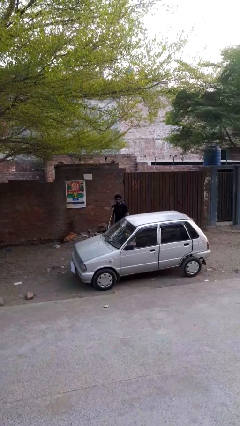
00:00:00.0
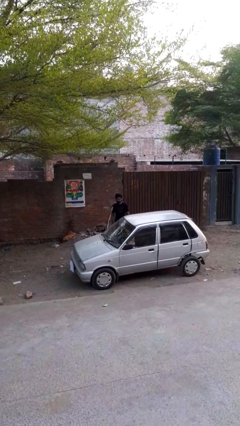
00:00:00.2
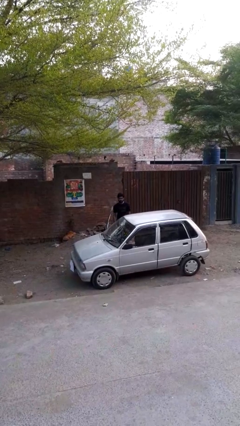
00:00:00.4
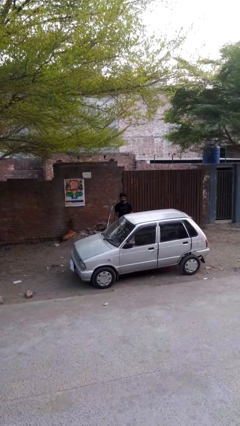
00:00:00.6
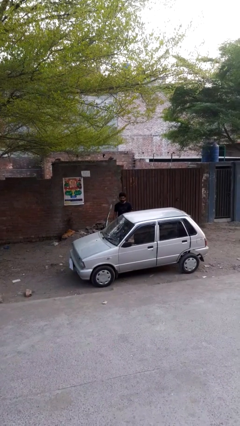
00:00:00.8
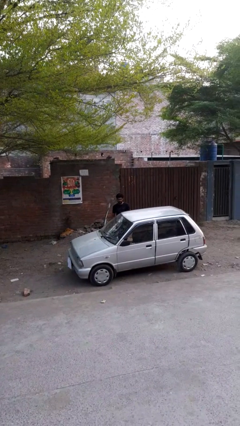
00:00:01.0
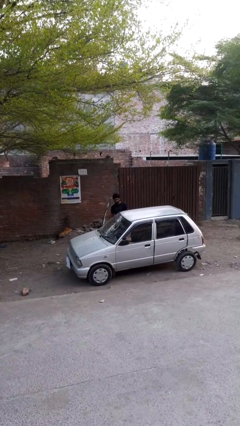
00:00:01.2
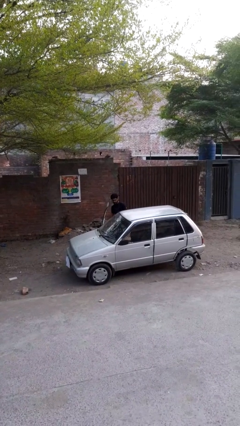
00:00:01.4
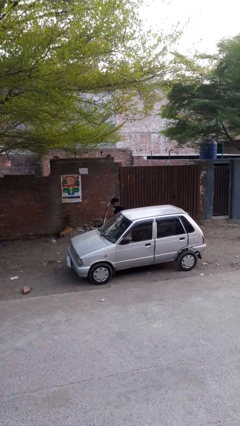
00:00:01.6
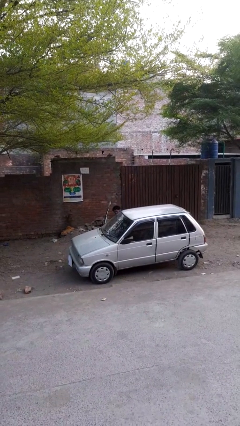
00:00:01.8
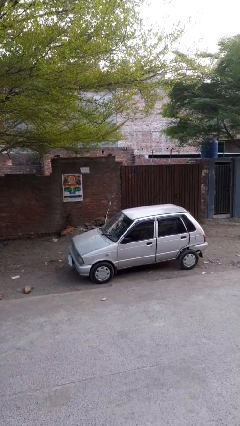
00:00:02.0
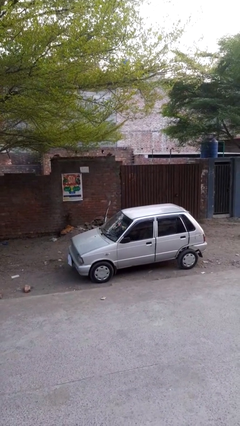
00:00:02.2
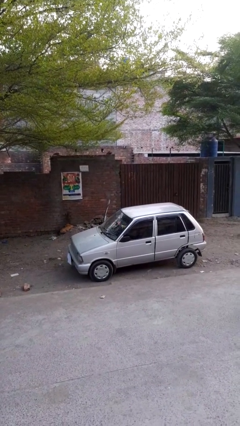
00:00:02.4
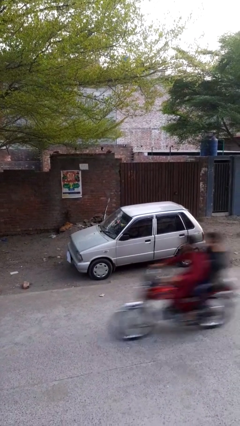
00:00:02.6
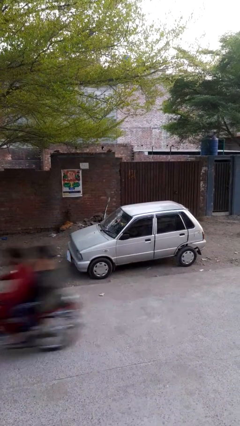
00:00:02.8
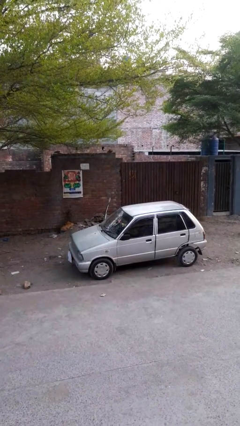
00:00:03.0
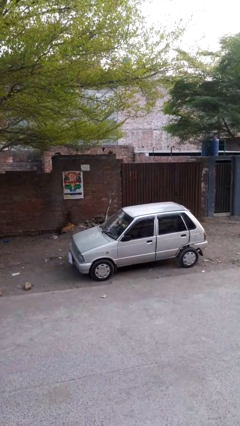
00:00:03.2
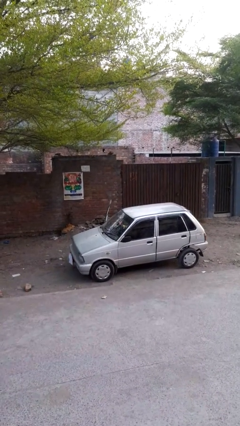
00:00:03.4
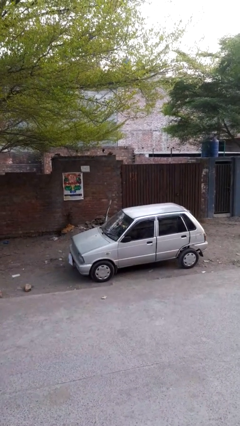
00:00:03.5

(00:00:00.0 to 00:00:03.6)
person enters car

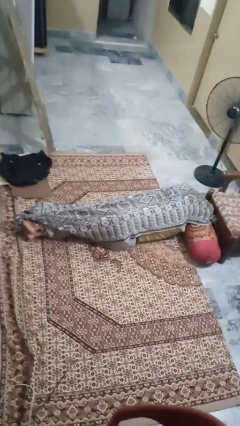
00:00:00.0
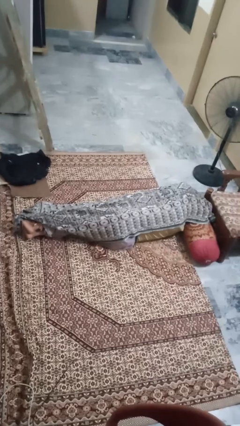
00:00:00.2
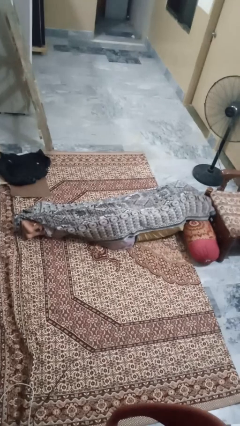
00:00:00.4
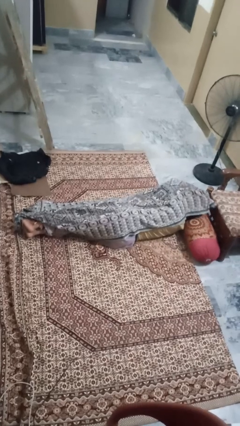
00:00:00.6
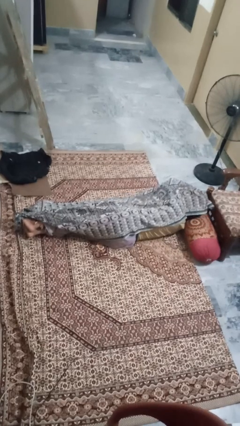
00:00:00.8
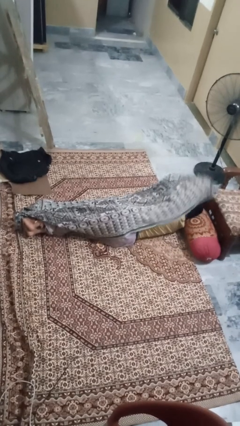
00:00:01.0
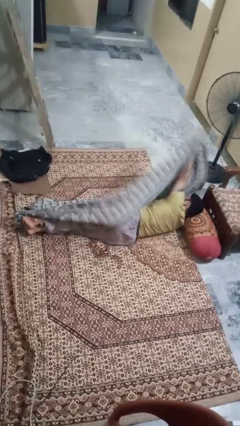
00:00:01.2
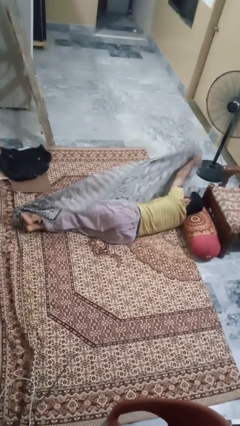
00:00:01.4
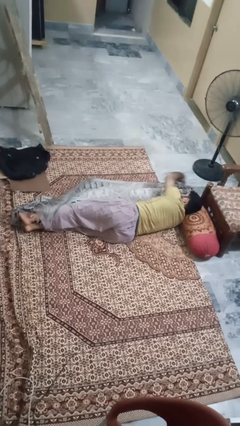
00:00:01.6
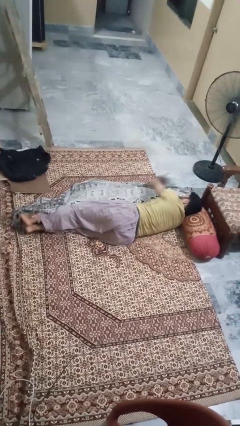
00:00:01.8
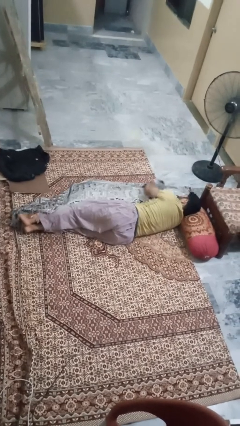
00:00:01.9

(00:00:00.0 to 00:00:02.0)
person uncovers with blanket

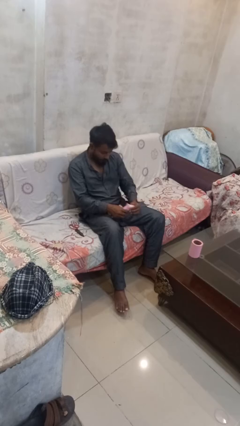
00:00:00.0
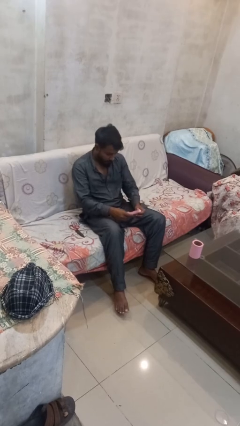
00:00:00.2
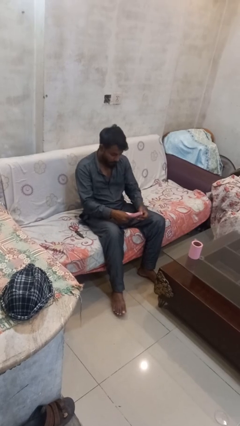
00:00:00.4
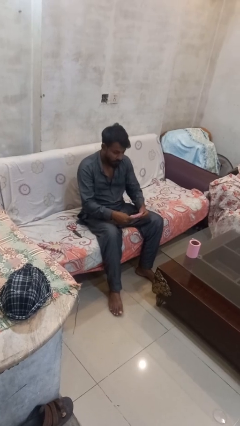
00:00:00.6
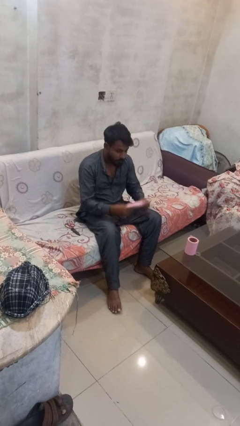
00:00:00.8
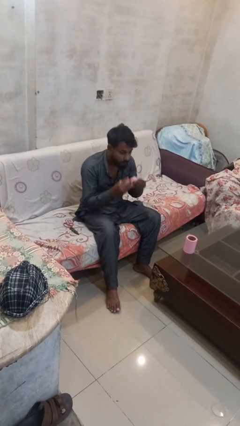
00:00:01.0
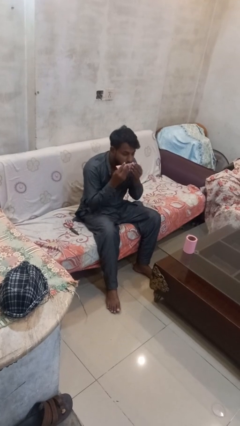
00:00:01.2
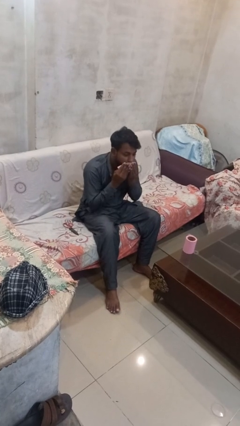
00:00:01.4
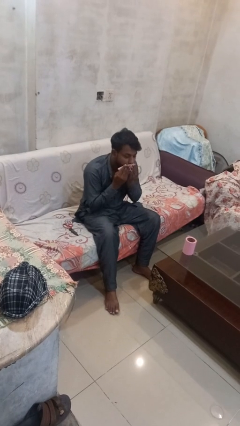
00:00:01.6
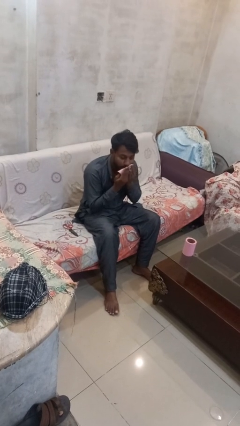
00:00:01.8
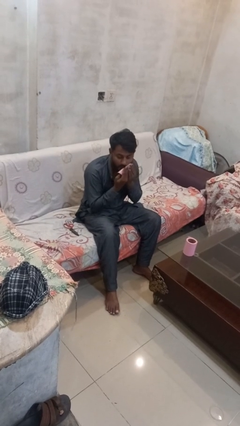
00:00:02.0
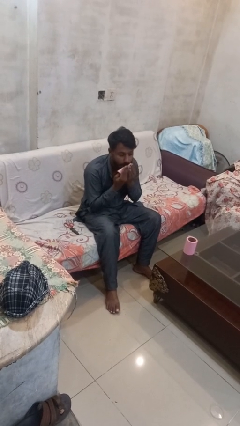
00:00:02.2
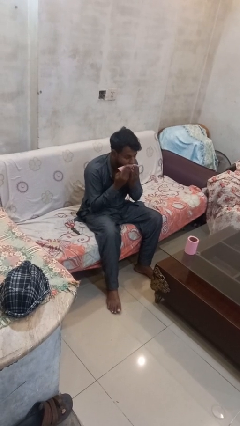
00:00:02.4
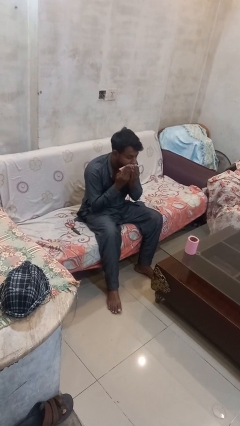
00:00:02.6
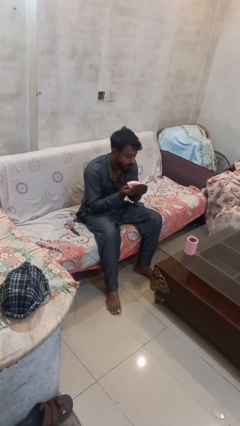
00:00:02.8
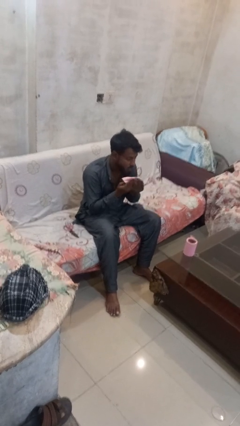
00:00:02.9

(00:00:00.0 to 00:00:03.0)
person wipes mouth with napkin

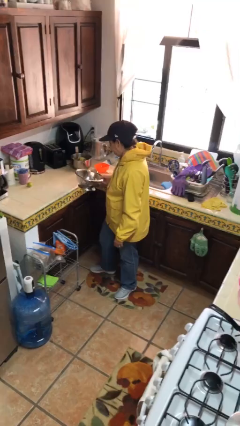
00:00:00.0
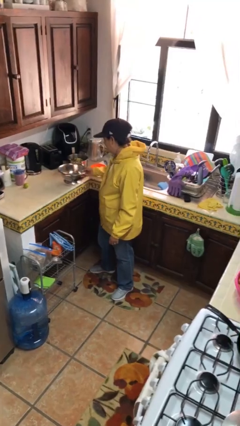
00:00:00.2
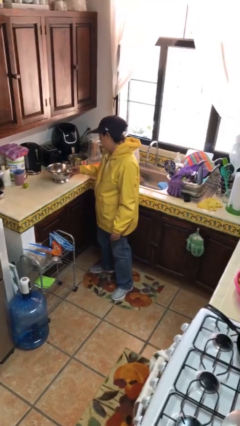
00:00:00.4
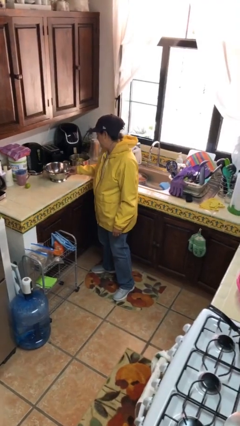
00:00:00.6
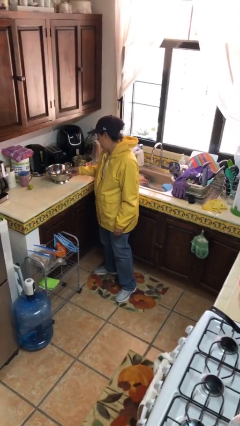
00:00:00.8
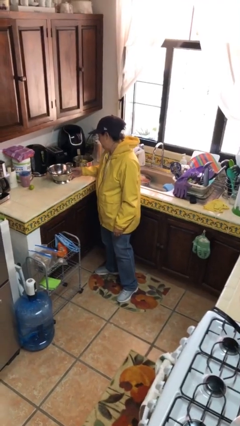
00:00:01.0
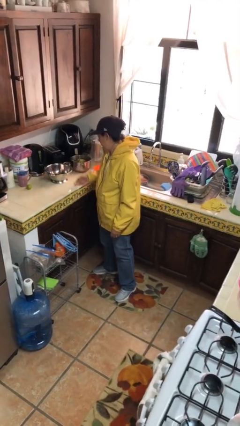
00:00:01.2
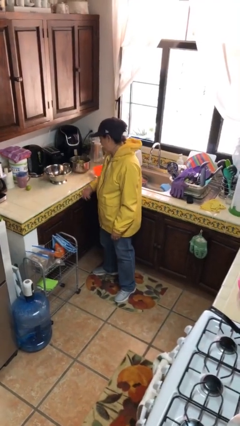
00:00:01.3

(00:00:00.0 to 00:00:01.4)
person puts down object on countertop

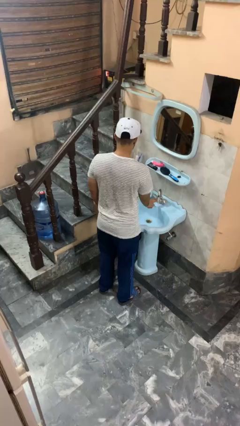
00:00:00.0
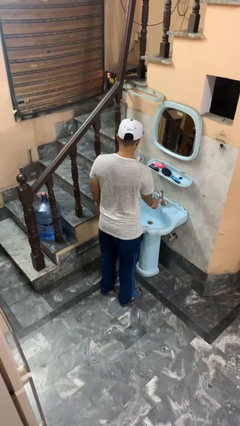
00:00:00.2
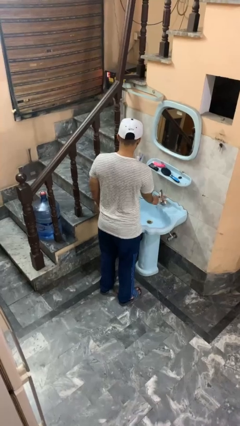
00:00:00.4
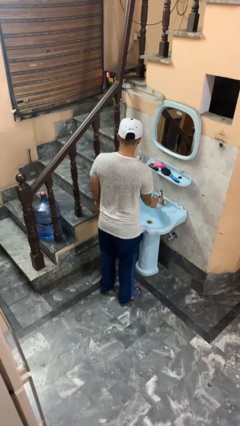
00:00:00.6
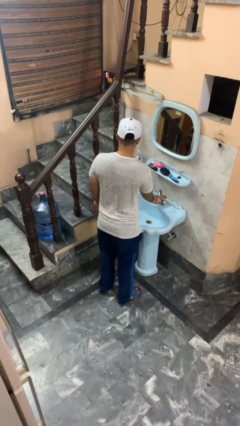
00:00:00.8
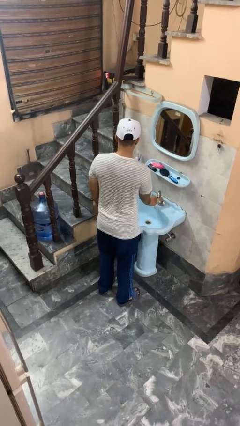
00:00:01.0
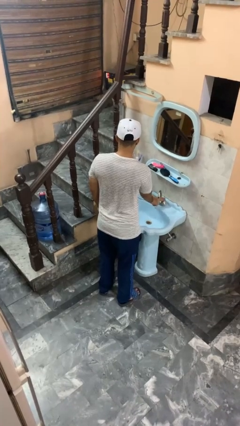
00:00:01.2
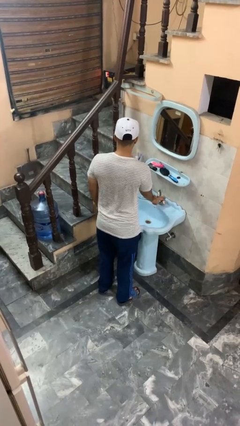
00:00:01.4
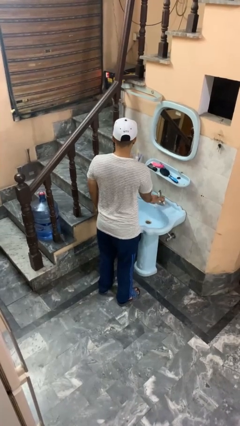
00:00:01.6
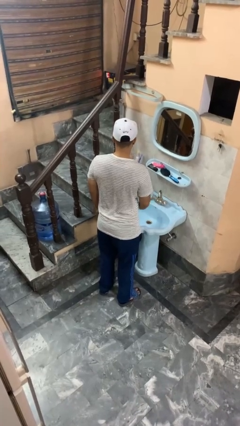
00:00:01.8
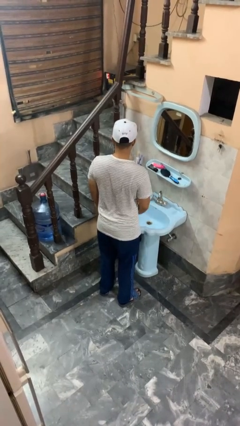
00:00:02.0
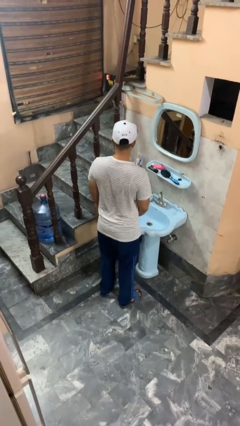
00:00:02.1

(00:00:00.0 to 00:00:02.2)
person turns off faucet

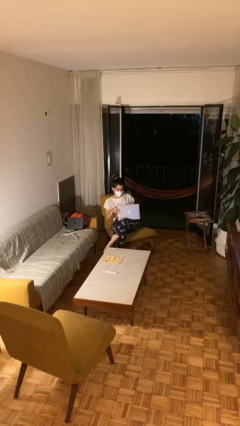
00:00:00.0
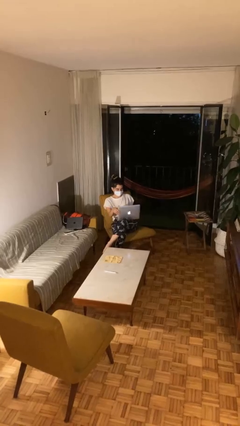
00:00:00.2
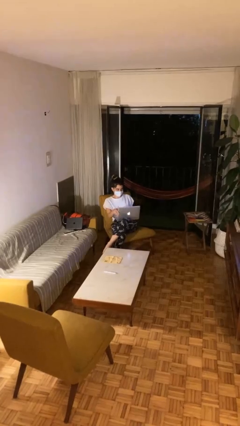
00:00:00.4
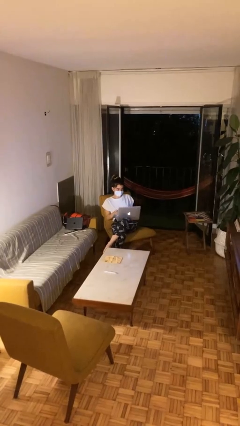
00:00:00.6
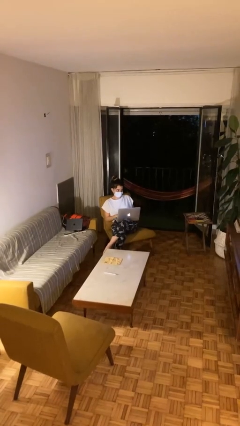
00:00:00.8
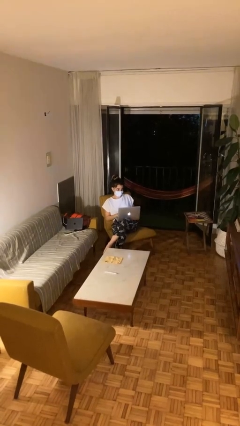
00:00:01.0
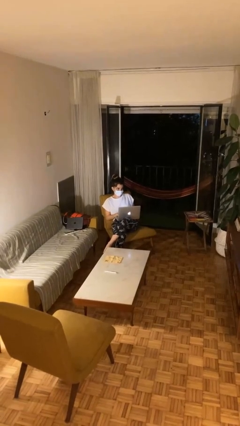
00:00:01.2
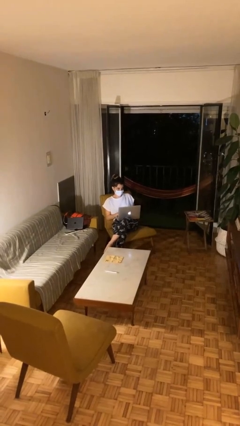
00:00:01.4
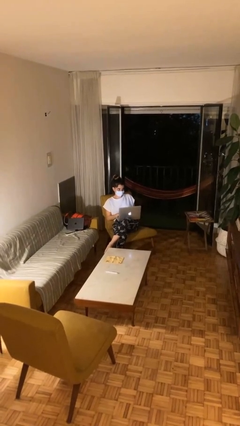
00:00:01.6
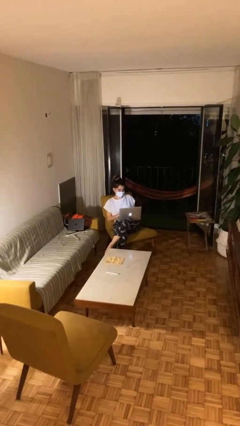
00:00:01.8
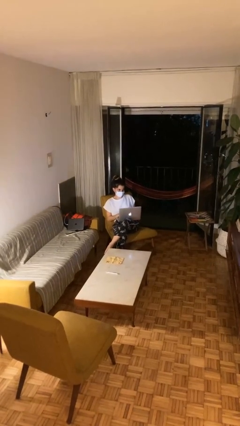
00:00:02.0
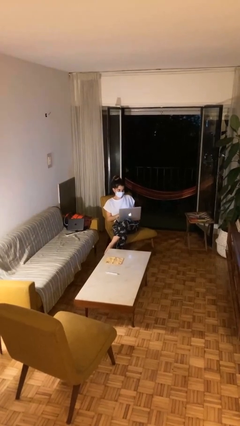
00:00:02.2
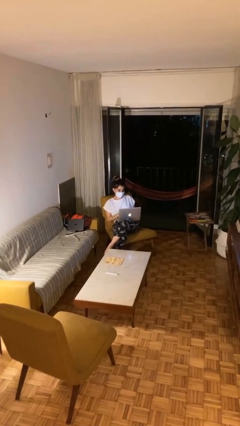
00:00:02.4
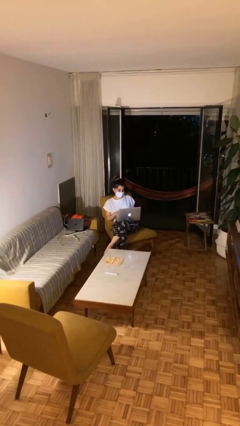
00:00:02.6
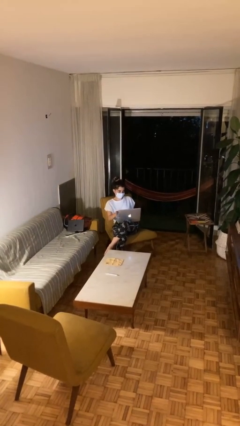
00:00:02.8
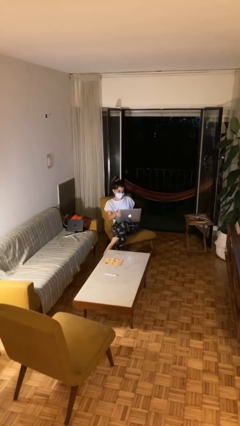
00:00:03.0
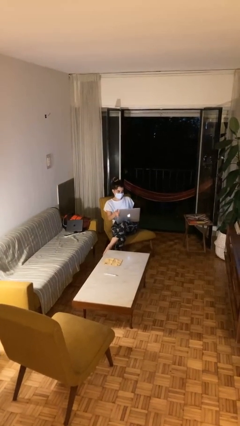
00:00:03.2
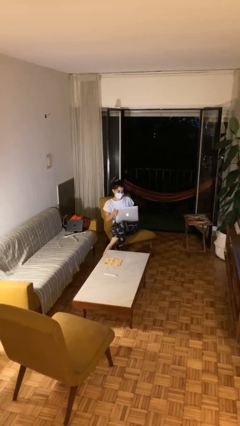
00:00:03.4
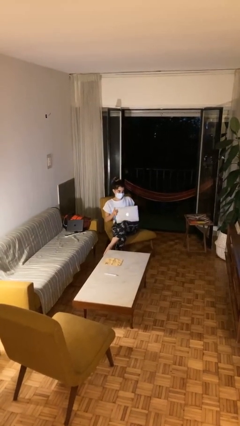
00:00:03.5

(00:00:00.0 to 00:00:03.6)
person interacts with laptop

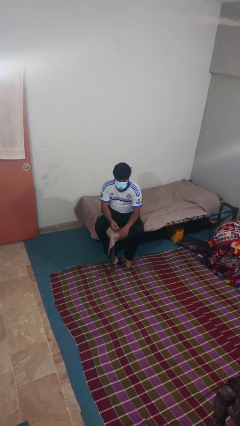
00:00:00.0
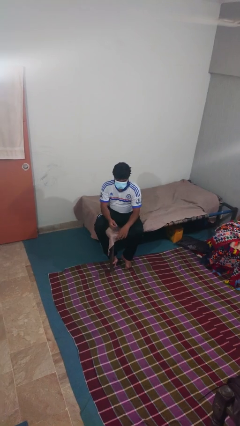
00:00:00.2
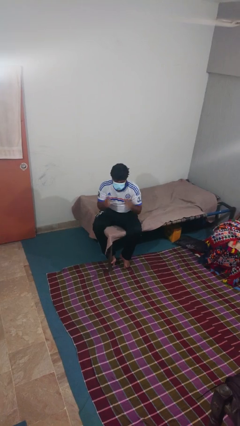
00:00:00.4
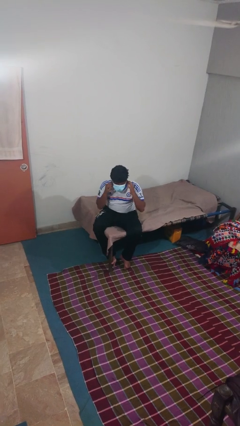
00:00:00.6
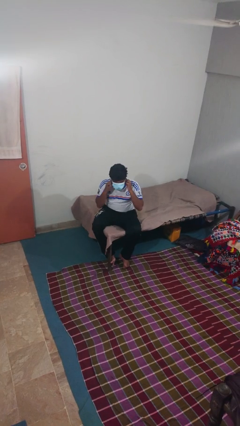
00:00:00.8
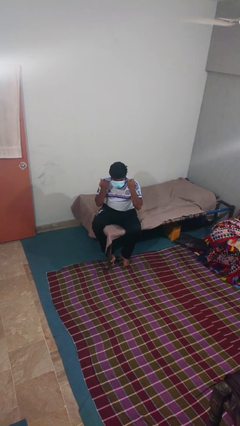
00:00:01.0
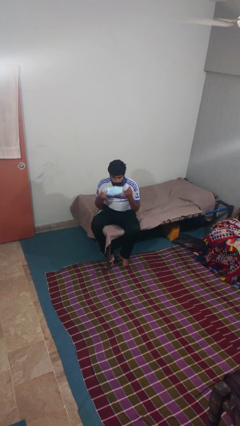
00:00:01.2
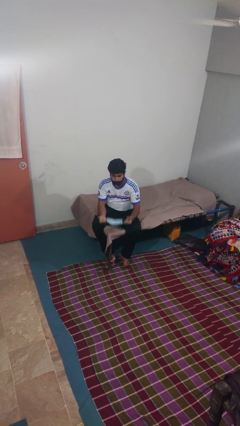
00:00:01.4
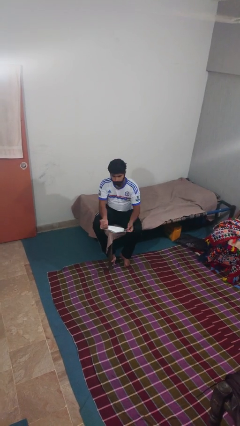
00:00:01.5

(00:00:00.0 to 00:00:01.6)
person takes off facemask
